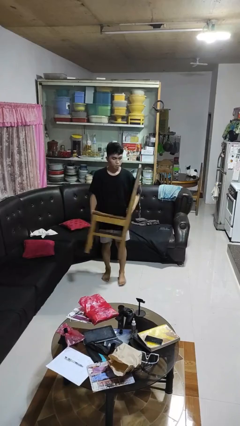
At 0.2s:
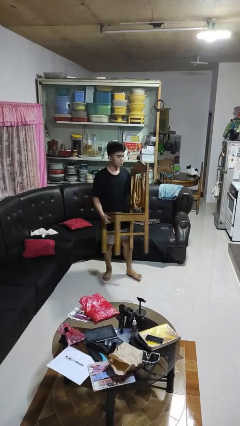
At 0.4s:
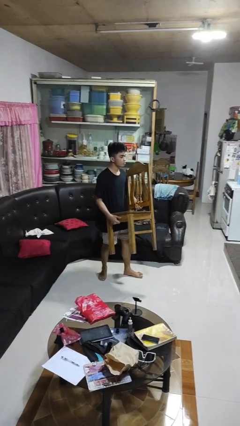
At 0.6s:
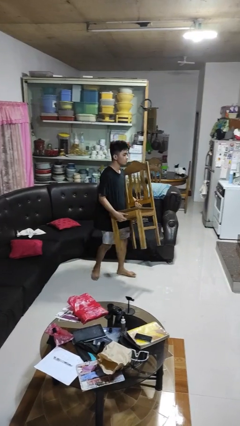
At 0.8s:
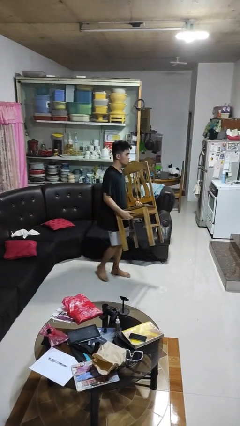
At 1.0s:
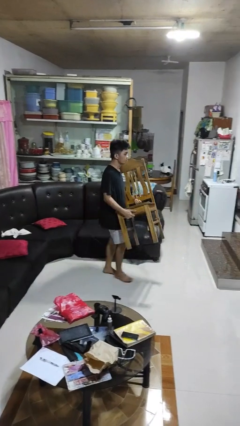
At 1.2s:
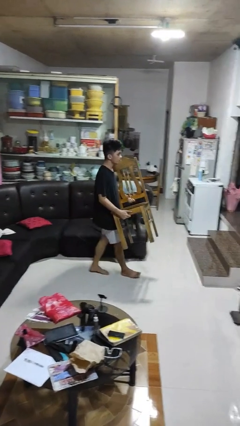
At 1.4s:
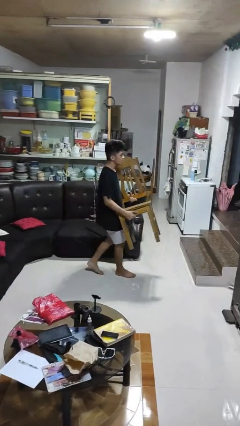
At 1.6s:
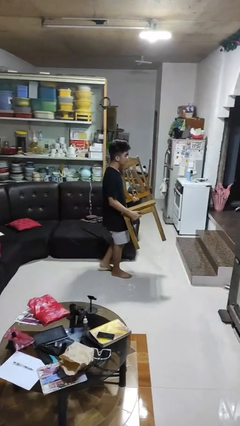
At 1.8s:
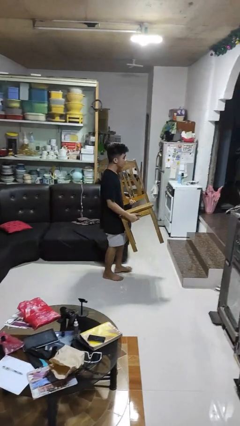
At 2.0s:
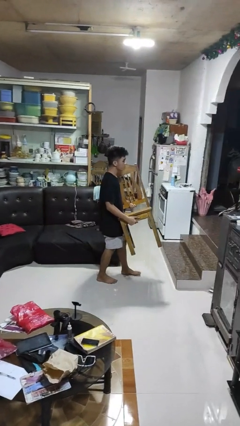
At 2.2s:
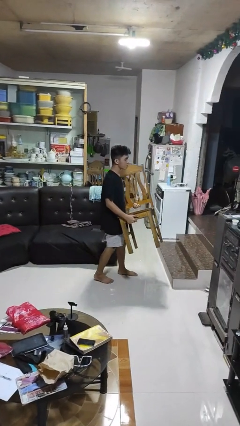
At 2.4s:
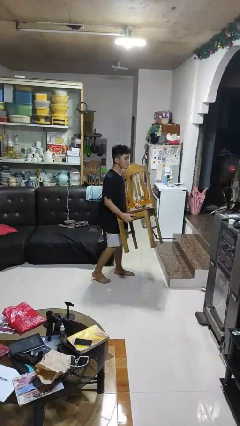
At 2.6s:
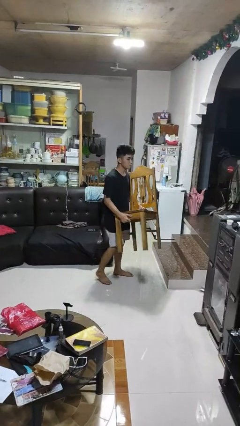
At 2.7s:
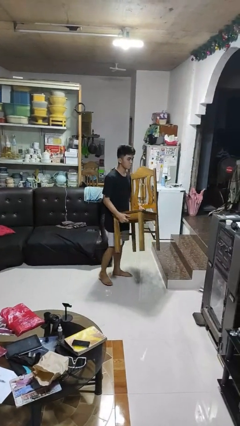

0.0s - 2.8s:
person carries furniture

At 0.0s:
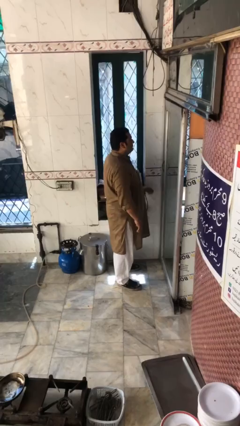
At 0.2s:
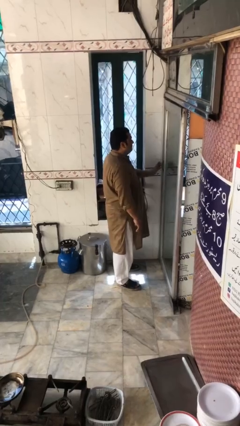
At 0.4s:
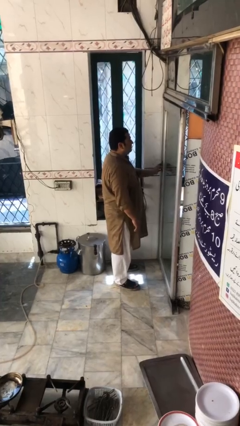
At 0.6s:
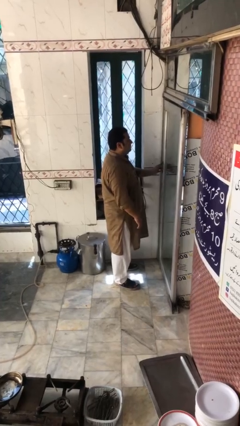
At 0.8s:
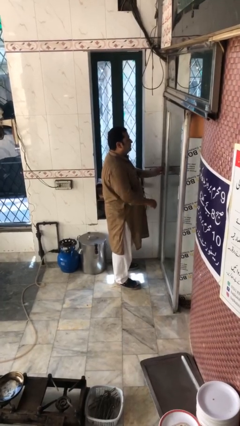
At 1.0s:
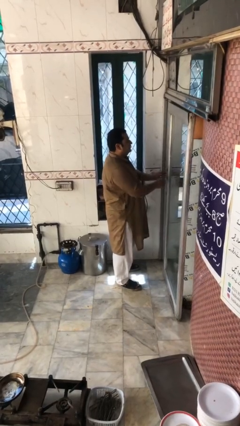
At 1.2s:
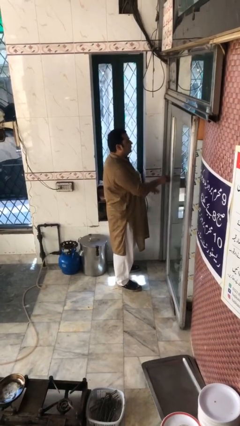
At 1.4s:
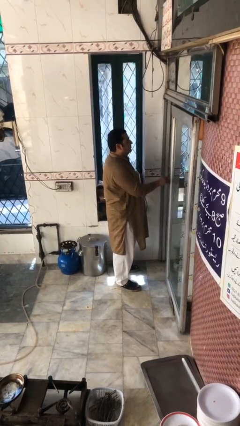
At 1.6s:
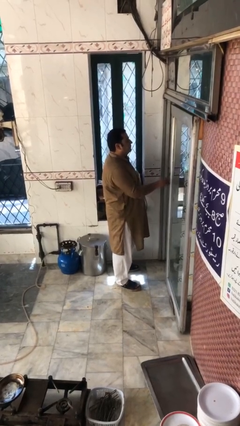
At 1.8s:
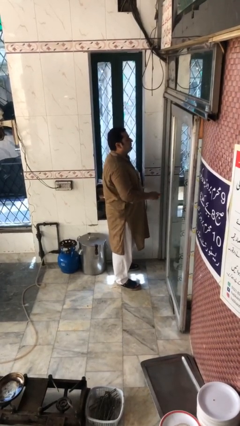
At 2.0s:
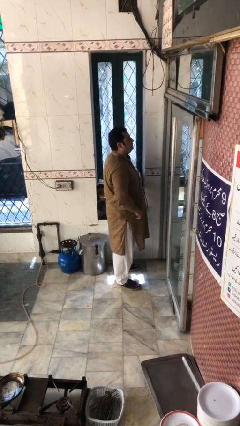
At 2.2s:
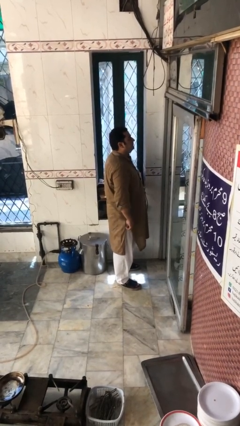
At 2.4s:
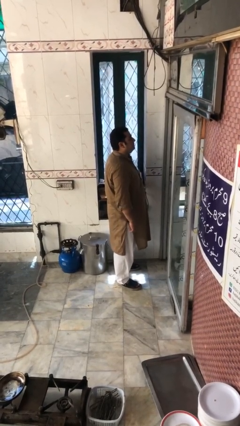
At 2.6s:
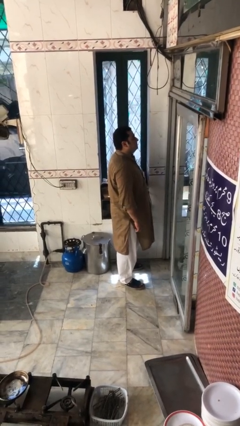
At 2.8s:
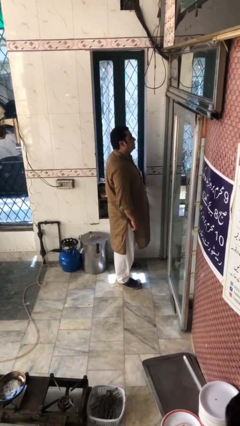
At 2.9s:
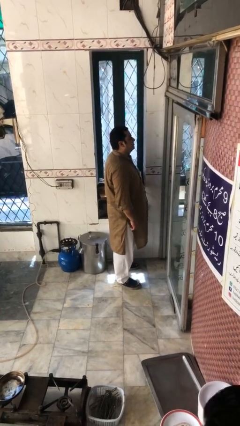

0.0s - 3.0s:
person opens sliding door

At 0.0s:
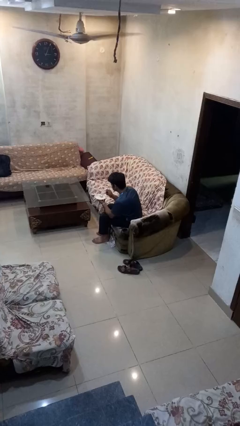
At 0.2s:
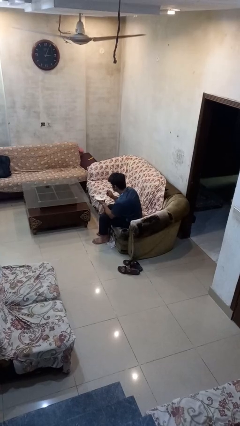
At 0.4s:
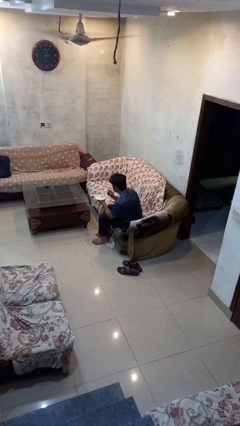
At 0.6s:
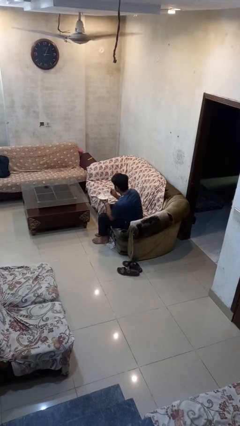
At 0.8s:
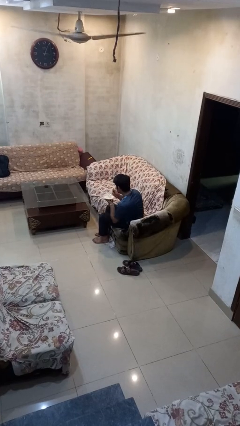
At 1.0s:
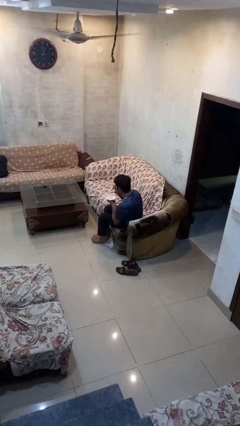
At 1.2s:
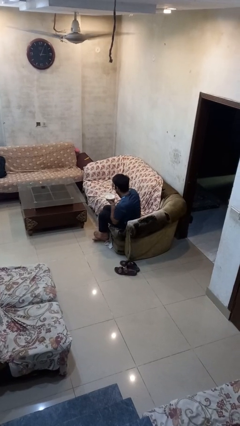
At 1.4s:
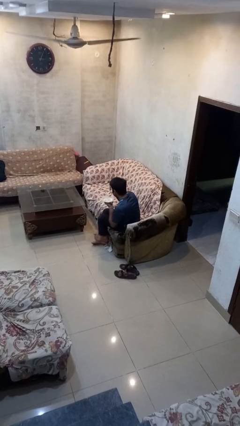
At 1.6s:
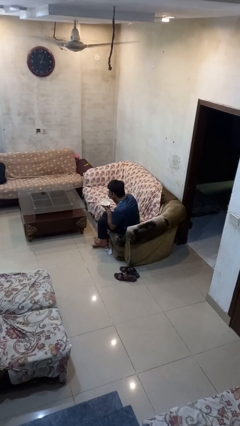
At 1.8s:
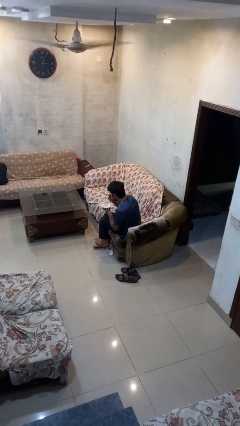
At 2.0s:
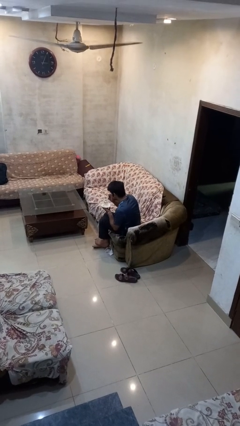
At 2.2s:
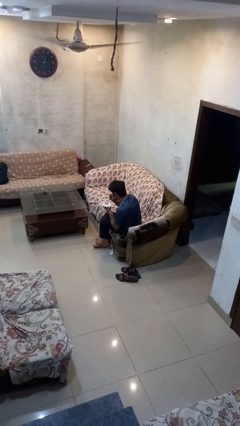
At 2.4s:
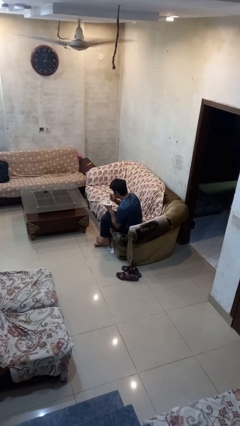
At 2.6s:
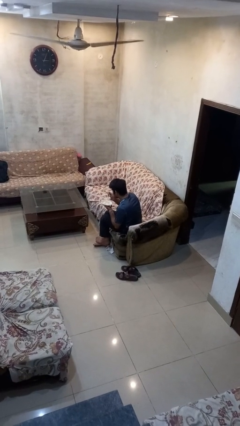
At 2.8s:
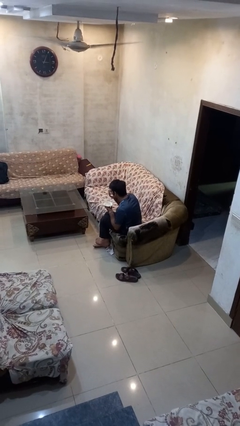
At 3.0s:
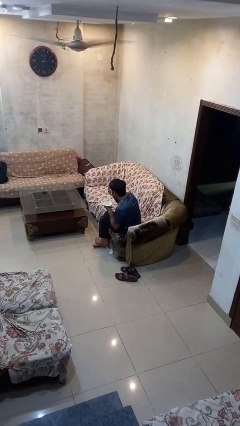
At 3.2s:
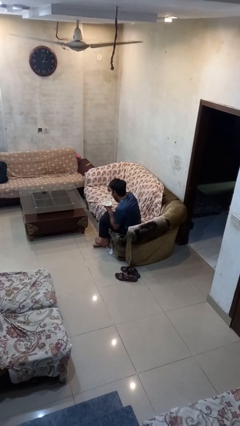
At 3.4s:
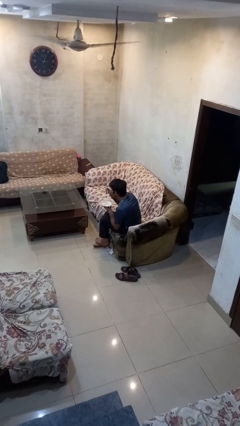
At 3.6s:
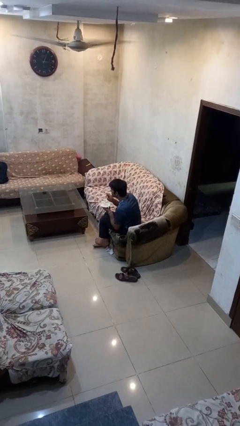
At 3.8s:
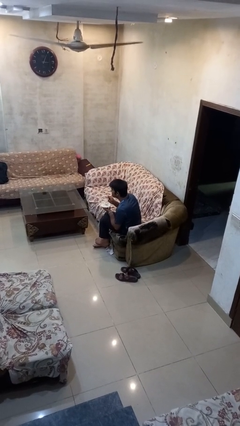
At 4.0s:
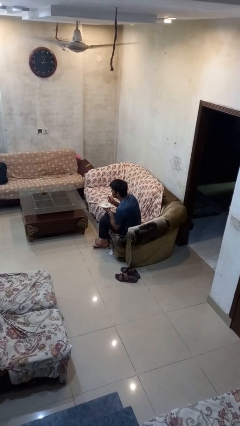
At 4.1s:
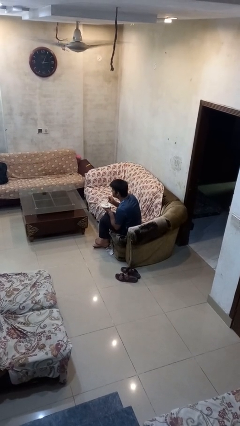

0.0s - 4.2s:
person eats with utensil

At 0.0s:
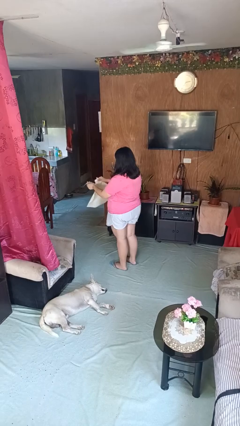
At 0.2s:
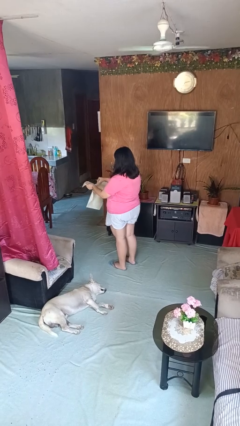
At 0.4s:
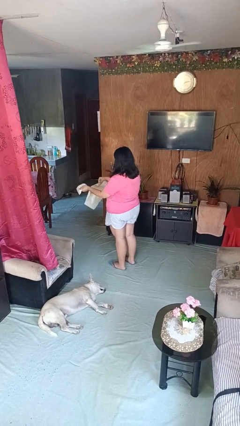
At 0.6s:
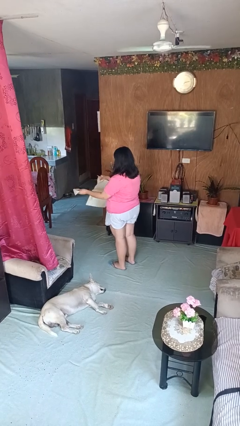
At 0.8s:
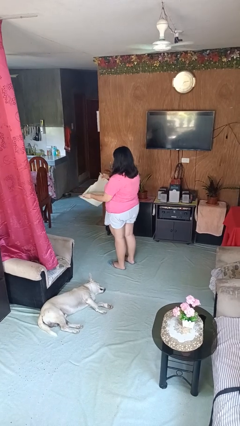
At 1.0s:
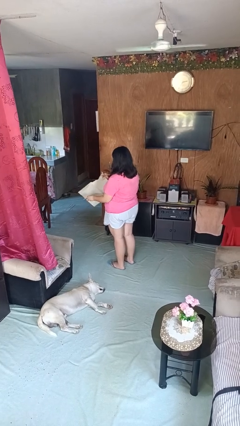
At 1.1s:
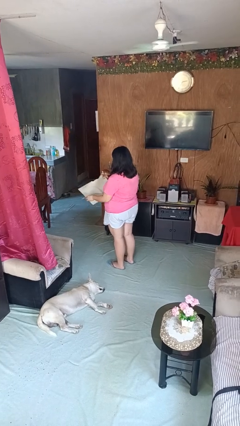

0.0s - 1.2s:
person tears paper

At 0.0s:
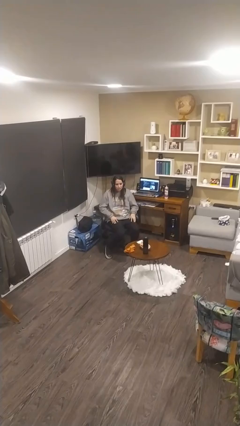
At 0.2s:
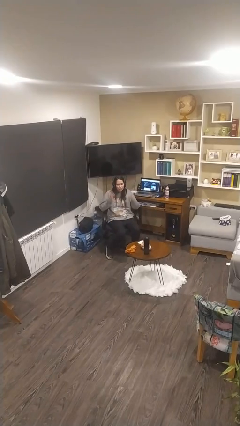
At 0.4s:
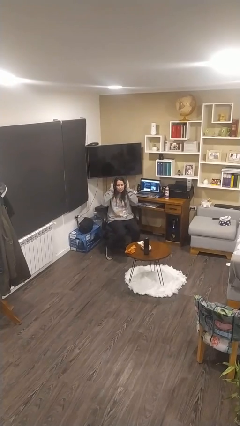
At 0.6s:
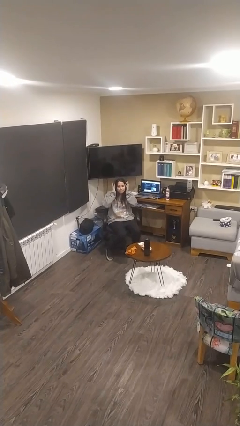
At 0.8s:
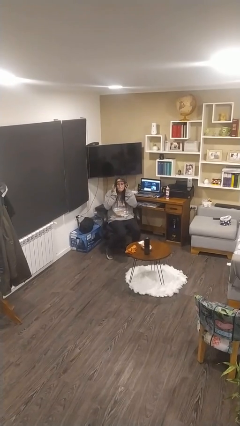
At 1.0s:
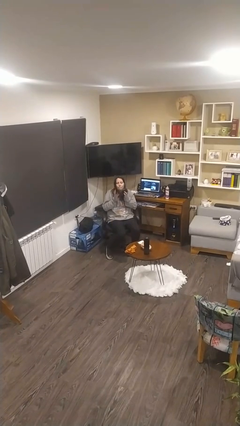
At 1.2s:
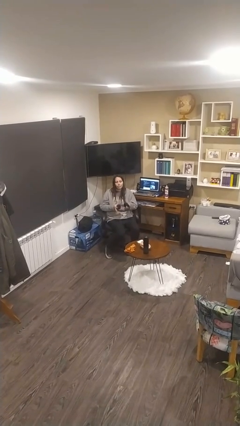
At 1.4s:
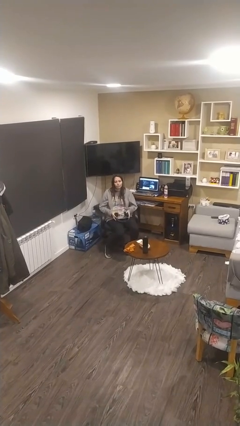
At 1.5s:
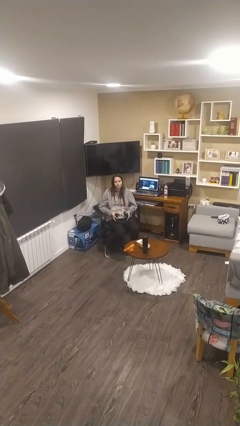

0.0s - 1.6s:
person takes off headphones

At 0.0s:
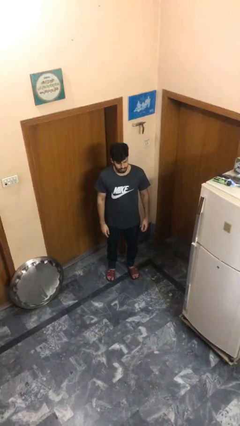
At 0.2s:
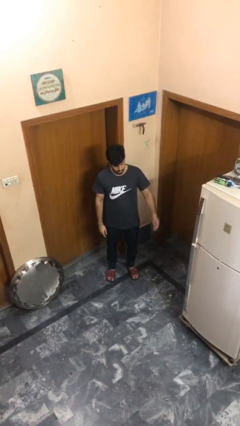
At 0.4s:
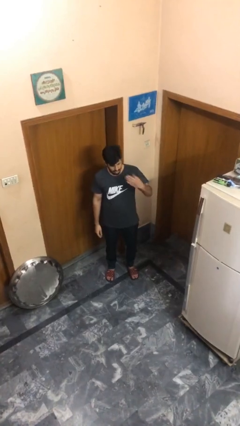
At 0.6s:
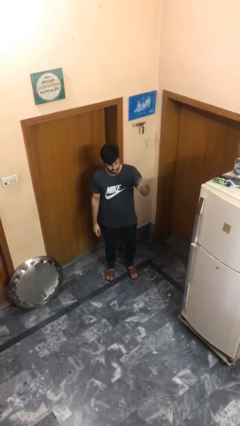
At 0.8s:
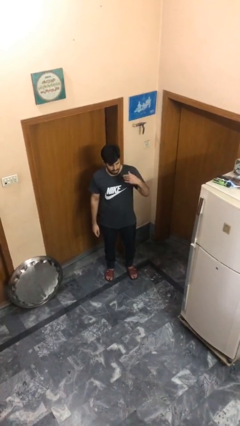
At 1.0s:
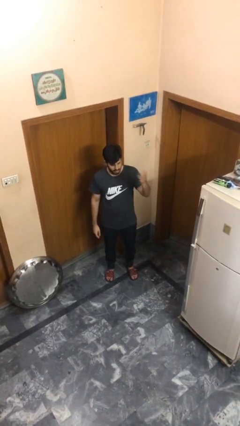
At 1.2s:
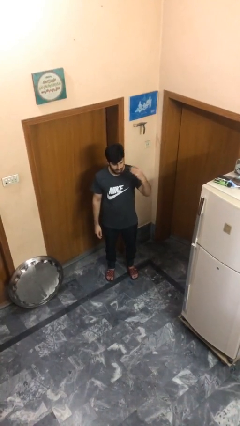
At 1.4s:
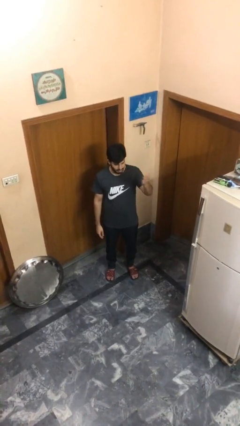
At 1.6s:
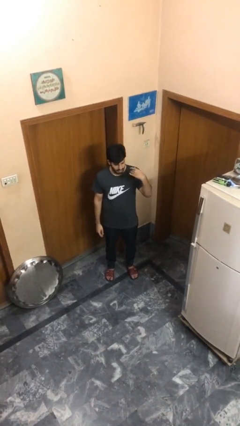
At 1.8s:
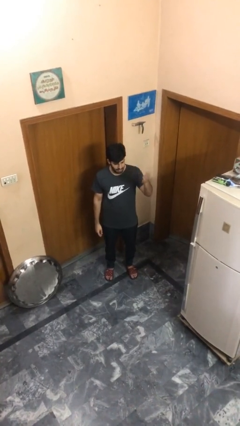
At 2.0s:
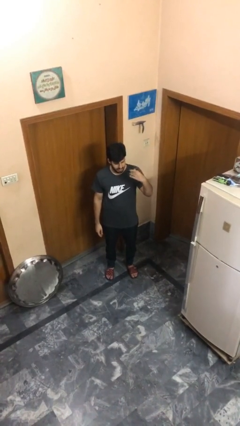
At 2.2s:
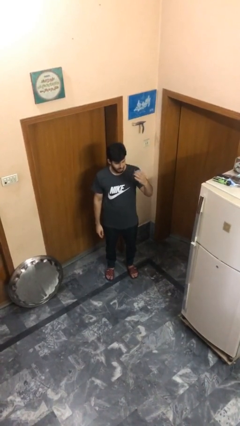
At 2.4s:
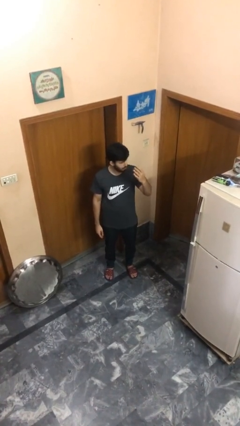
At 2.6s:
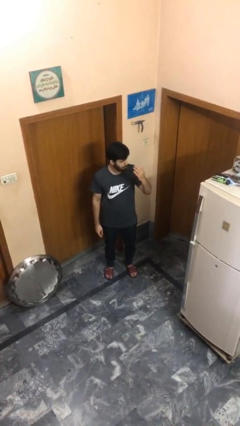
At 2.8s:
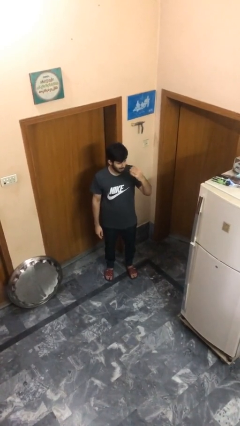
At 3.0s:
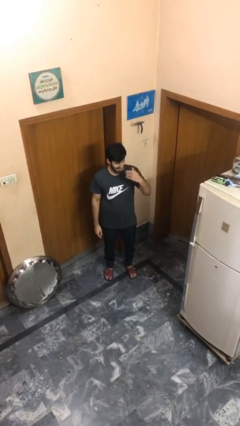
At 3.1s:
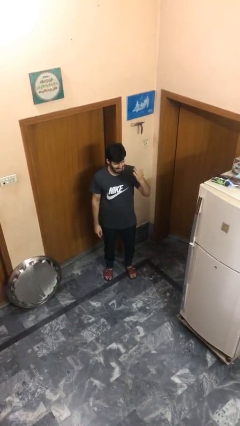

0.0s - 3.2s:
person gestures come here

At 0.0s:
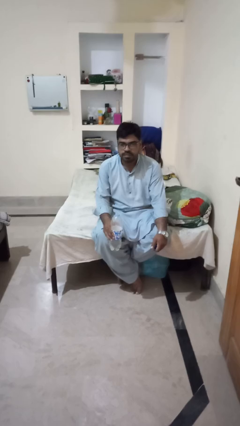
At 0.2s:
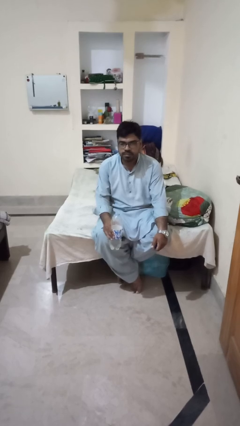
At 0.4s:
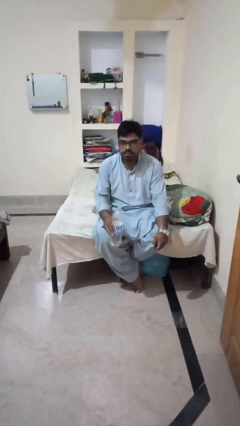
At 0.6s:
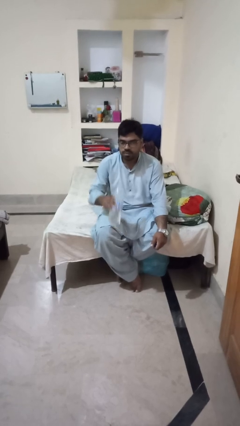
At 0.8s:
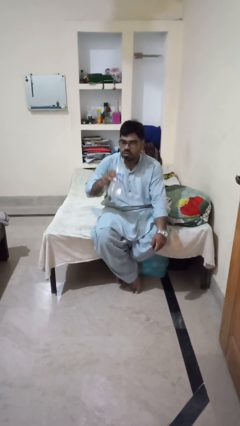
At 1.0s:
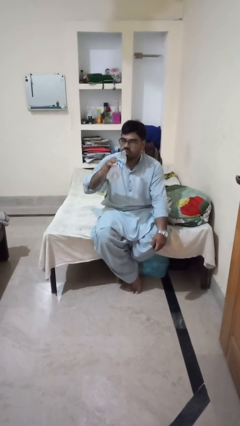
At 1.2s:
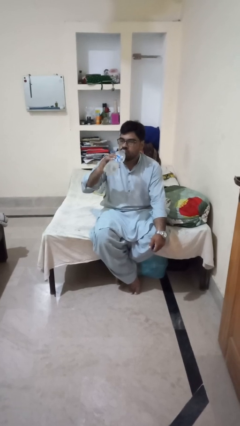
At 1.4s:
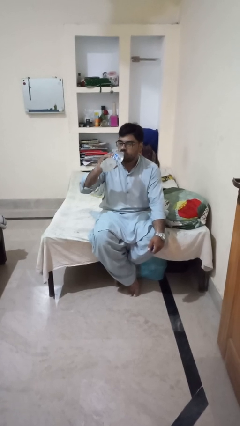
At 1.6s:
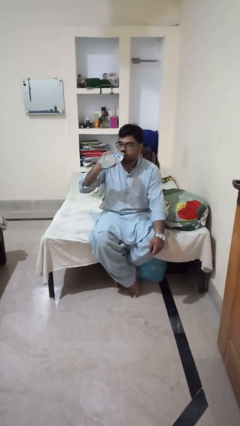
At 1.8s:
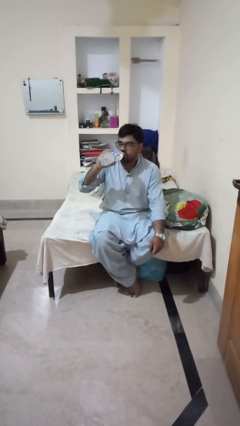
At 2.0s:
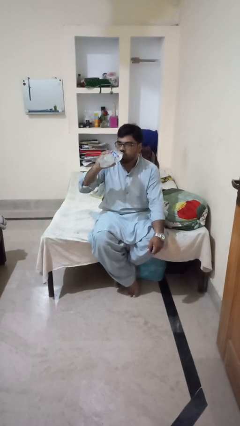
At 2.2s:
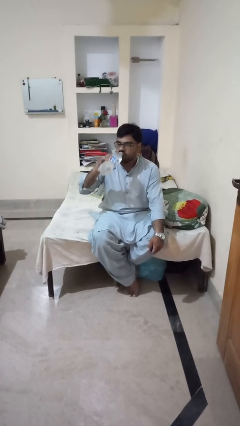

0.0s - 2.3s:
person drinks from bottle
